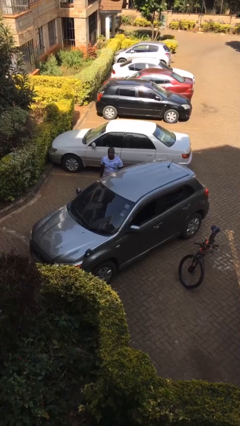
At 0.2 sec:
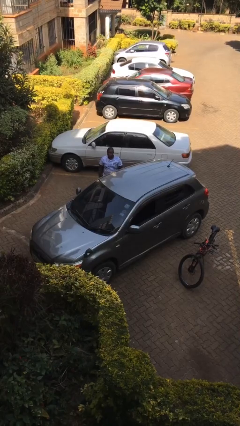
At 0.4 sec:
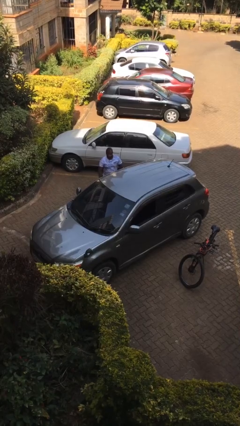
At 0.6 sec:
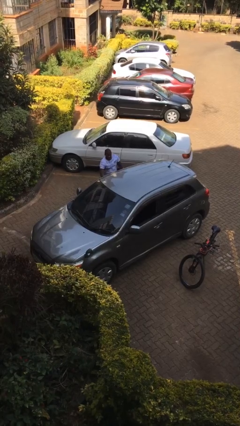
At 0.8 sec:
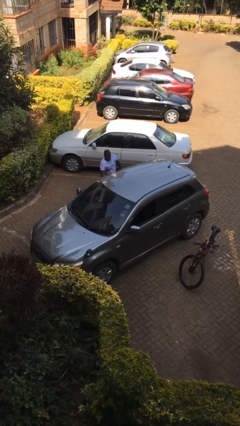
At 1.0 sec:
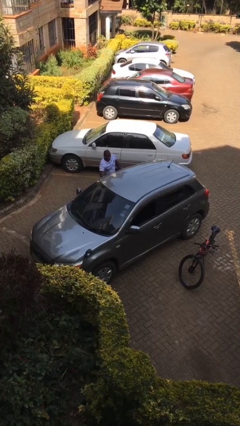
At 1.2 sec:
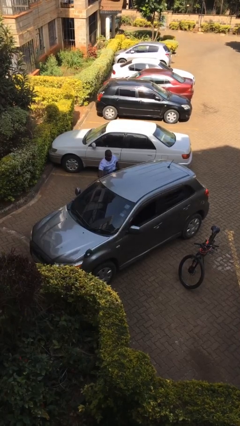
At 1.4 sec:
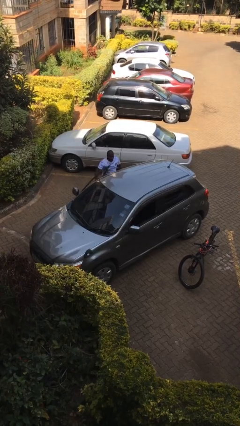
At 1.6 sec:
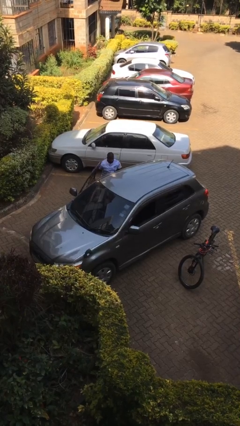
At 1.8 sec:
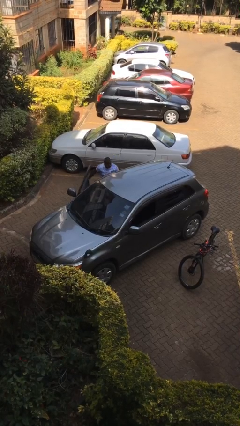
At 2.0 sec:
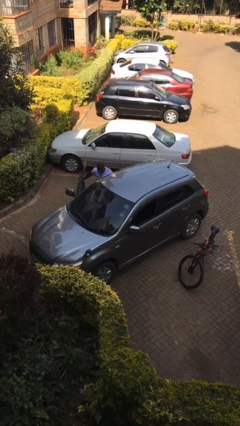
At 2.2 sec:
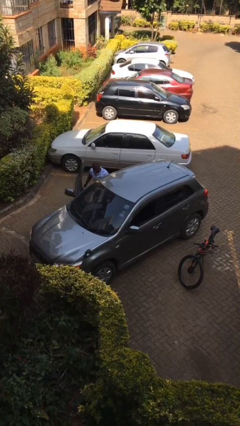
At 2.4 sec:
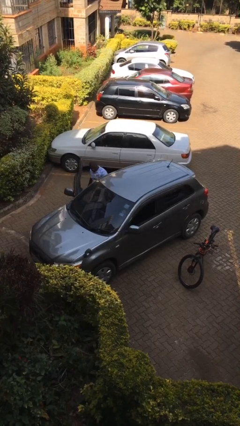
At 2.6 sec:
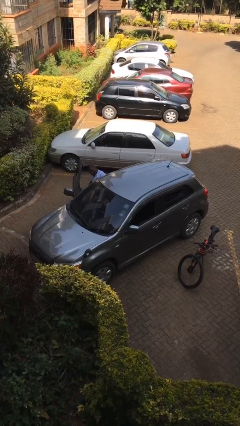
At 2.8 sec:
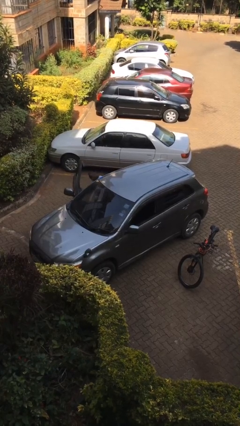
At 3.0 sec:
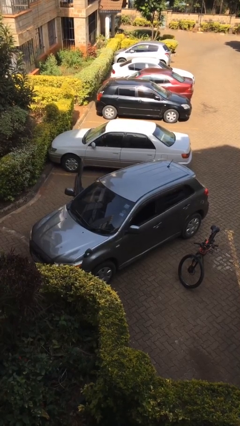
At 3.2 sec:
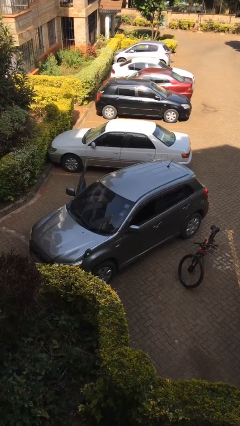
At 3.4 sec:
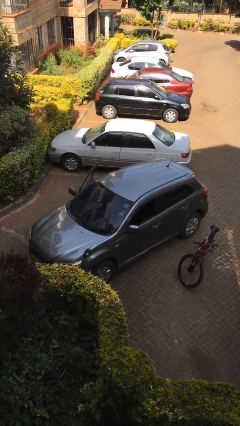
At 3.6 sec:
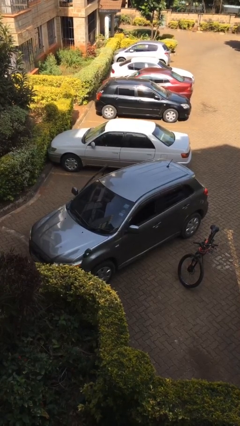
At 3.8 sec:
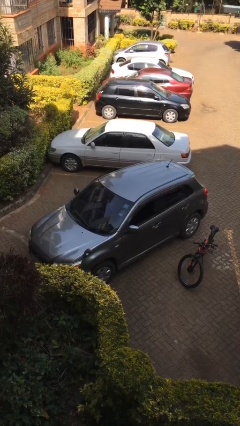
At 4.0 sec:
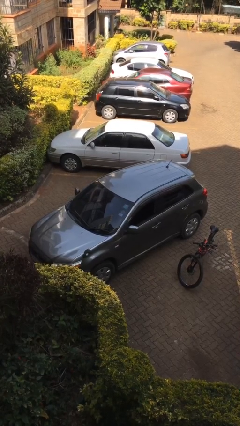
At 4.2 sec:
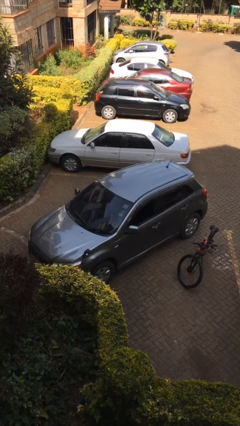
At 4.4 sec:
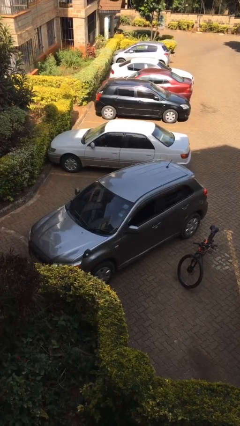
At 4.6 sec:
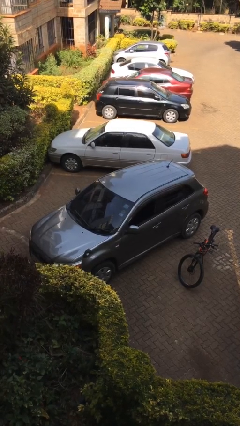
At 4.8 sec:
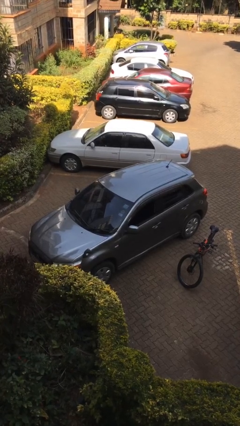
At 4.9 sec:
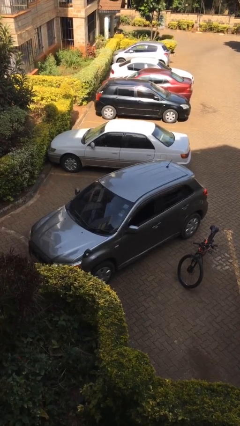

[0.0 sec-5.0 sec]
car picks up person

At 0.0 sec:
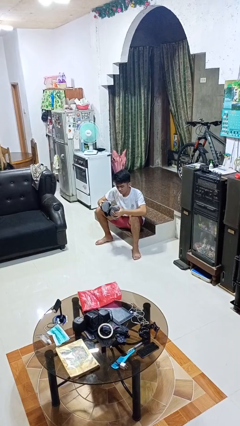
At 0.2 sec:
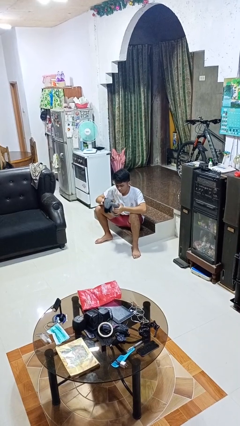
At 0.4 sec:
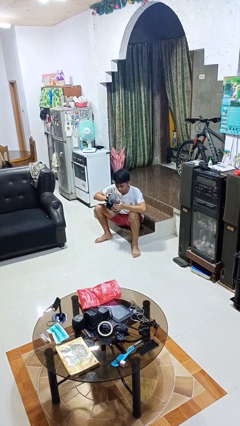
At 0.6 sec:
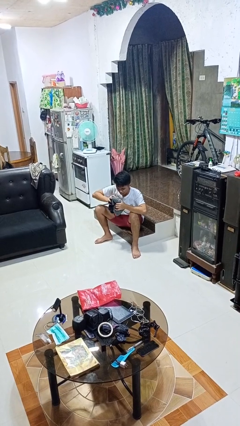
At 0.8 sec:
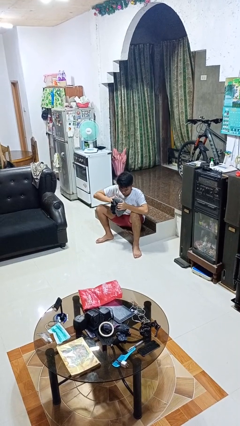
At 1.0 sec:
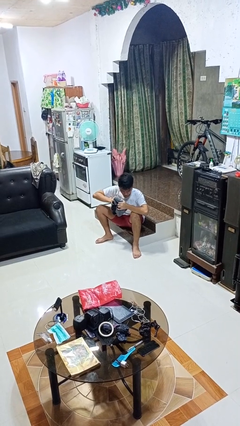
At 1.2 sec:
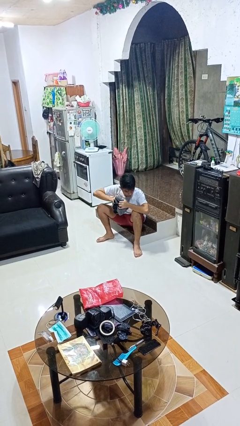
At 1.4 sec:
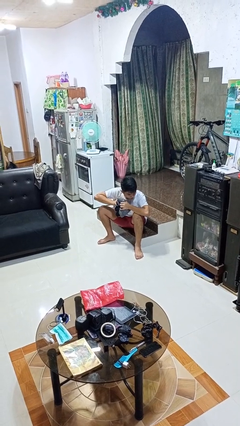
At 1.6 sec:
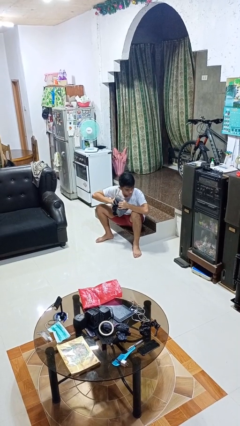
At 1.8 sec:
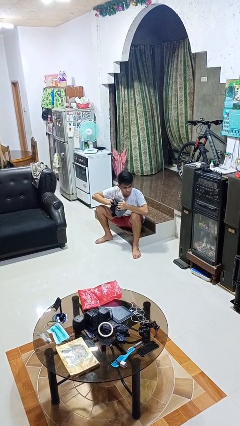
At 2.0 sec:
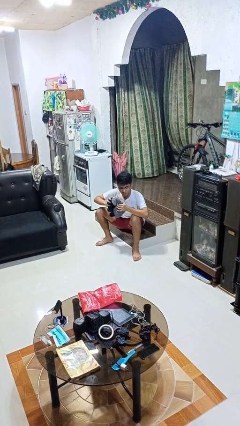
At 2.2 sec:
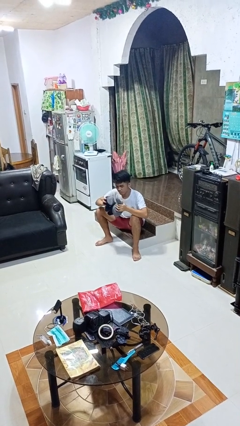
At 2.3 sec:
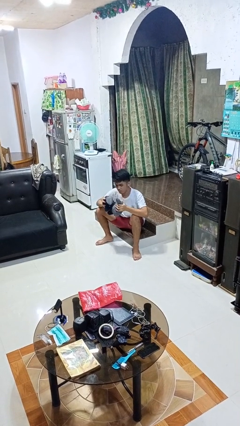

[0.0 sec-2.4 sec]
person squeezes object

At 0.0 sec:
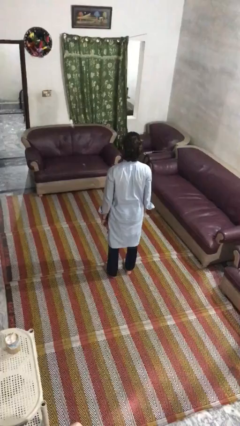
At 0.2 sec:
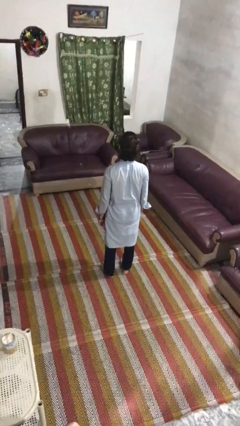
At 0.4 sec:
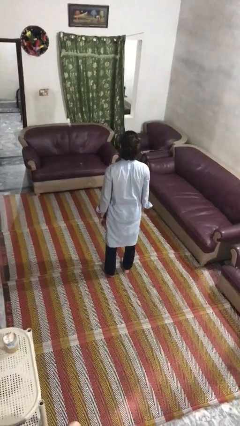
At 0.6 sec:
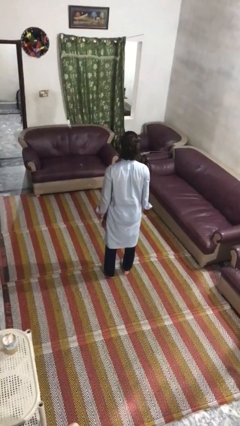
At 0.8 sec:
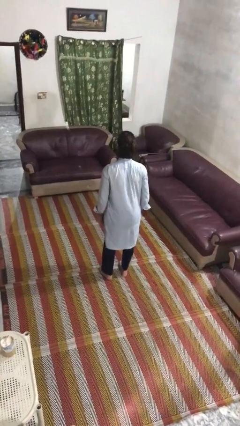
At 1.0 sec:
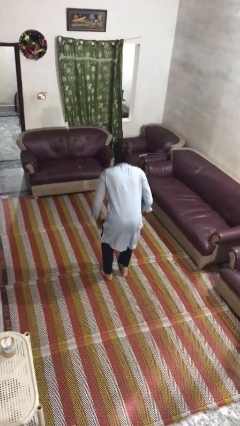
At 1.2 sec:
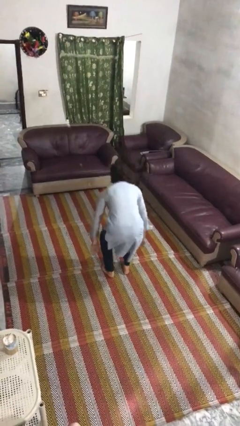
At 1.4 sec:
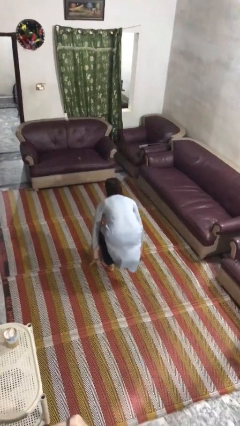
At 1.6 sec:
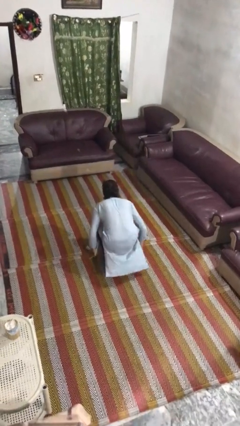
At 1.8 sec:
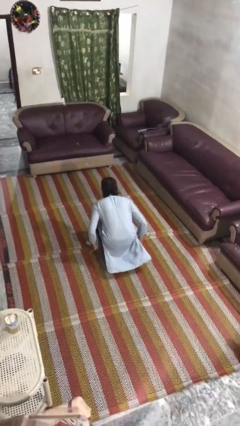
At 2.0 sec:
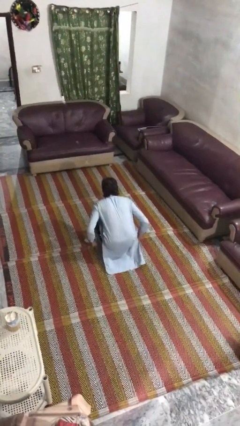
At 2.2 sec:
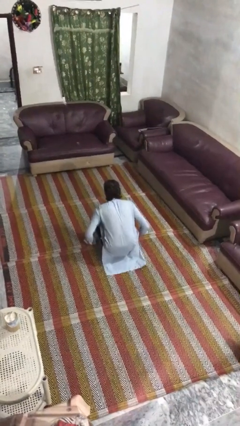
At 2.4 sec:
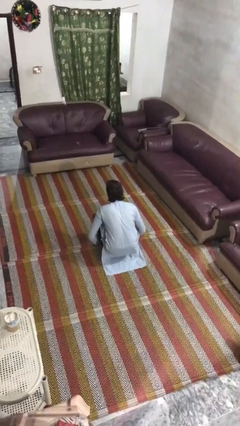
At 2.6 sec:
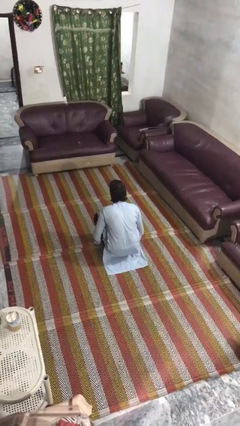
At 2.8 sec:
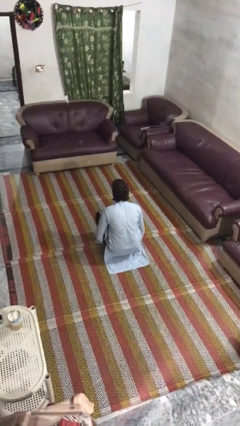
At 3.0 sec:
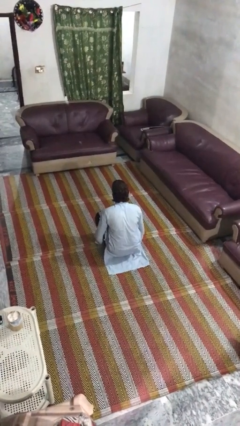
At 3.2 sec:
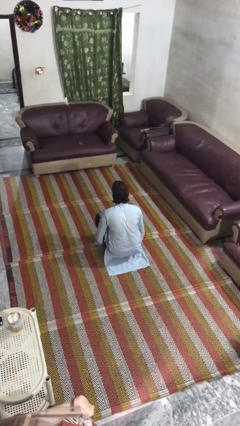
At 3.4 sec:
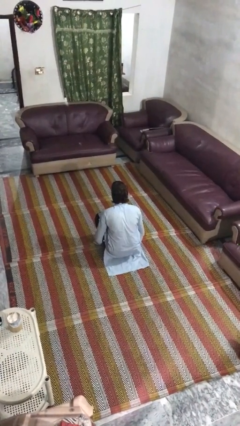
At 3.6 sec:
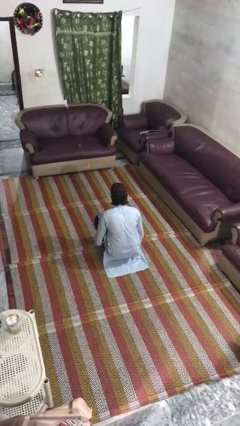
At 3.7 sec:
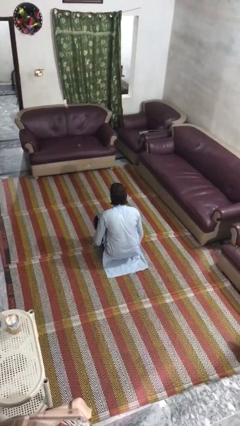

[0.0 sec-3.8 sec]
person squats

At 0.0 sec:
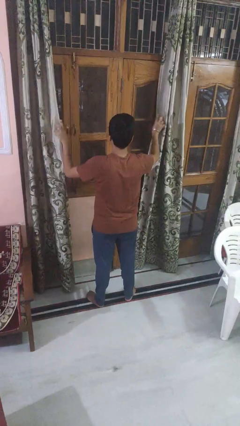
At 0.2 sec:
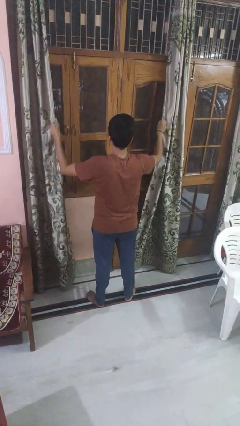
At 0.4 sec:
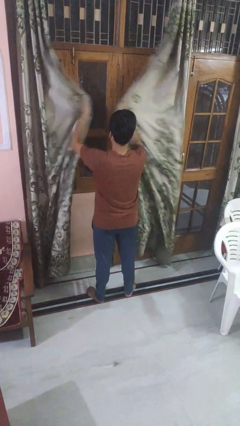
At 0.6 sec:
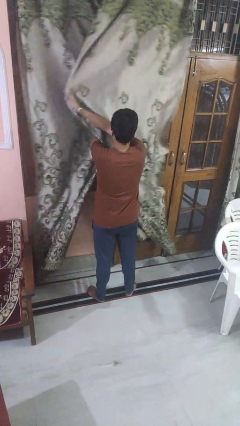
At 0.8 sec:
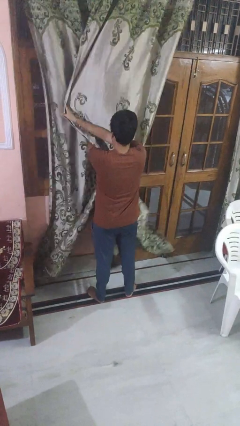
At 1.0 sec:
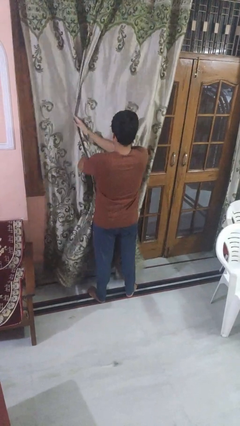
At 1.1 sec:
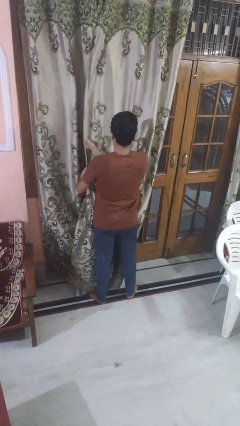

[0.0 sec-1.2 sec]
person closes curtains

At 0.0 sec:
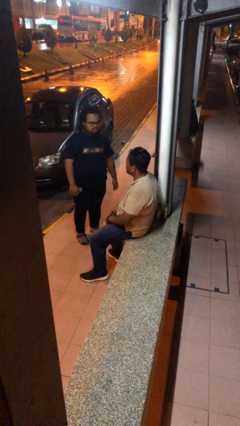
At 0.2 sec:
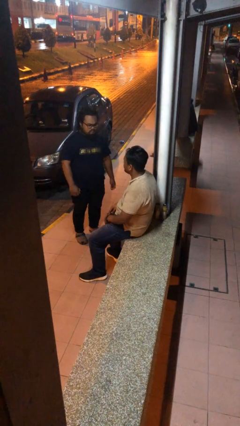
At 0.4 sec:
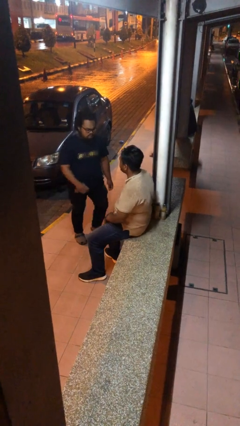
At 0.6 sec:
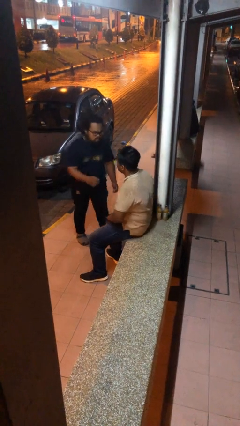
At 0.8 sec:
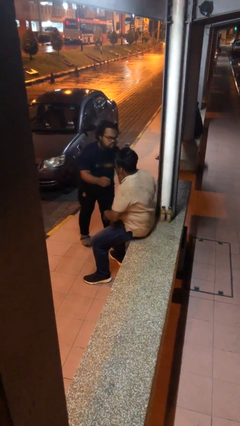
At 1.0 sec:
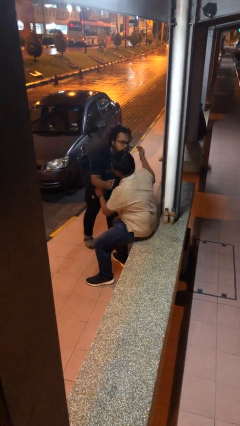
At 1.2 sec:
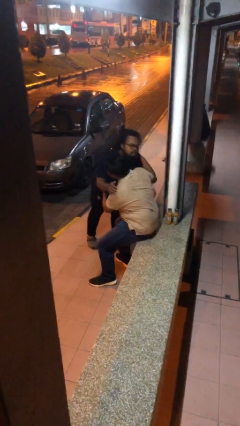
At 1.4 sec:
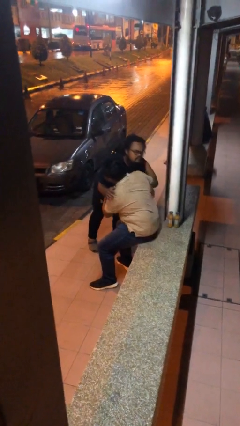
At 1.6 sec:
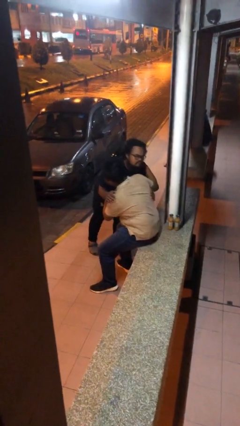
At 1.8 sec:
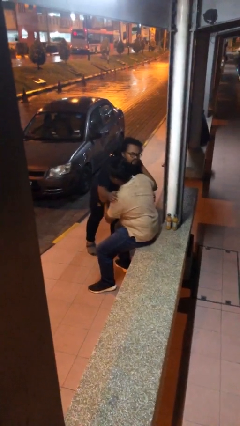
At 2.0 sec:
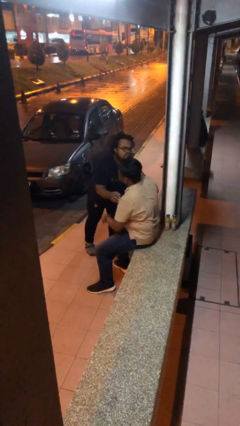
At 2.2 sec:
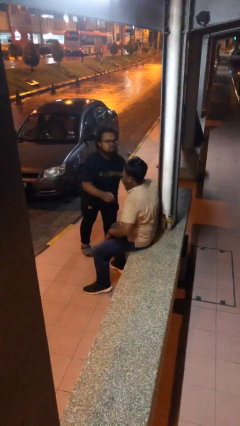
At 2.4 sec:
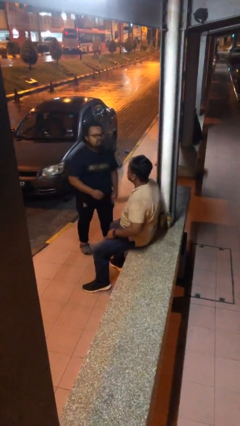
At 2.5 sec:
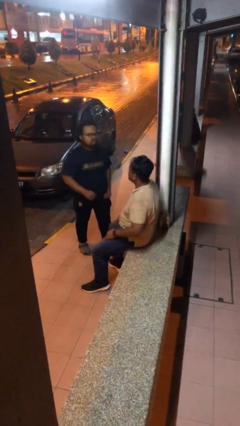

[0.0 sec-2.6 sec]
person embraces person

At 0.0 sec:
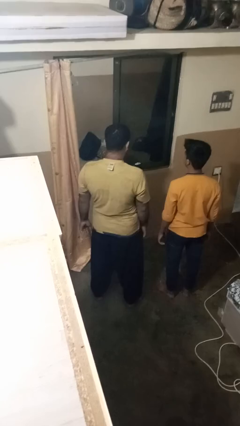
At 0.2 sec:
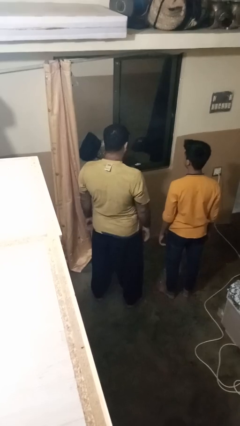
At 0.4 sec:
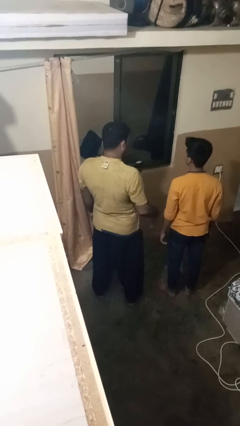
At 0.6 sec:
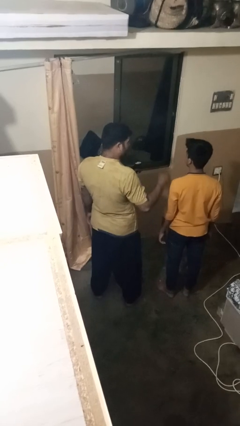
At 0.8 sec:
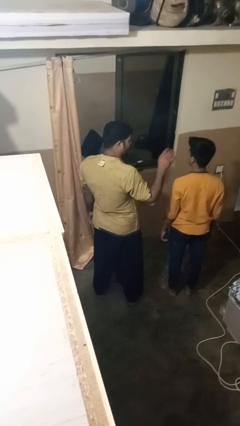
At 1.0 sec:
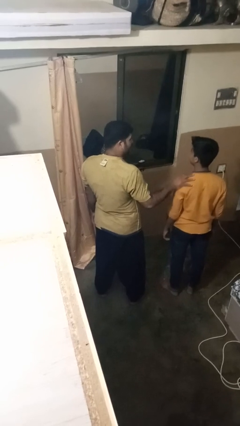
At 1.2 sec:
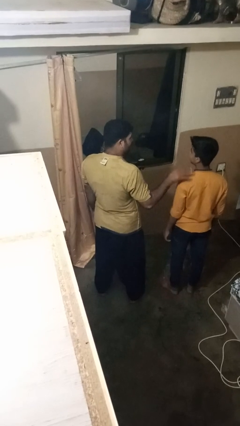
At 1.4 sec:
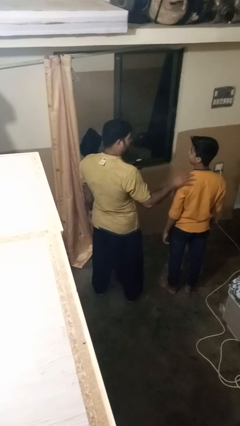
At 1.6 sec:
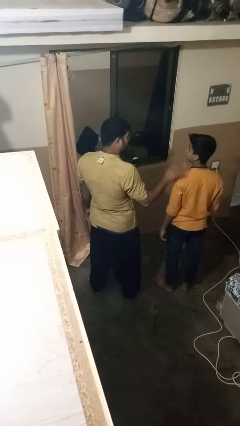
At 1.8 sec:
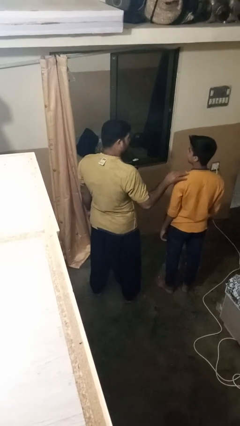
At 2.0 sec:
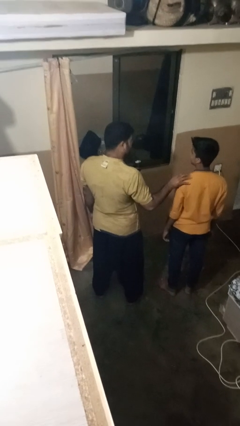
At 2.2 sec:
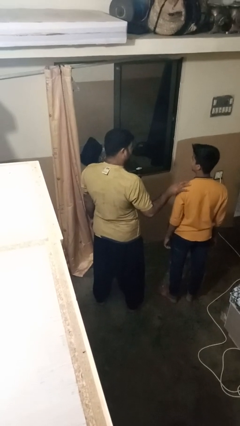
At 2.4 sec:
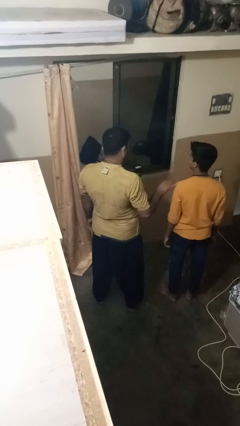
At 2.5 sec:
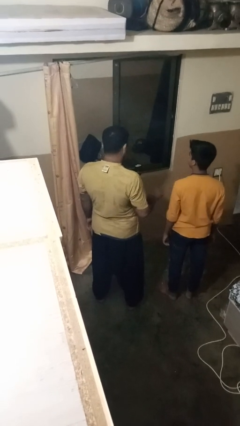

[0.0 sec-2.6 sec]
person pounds shoulders of person
